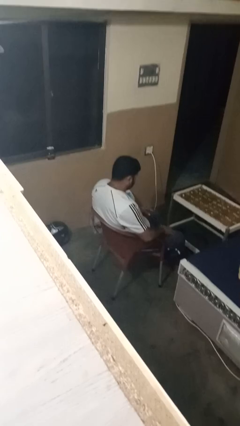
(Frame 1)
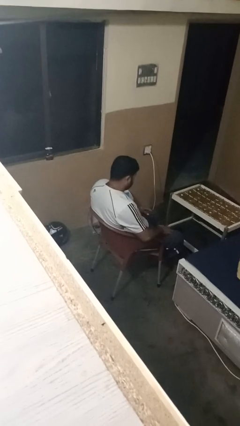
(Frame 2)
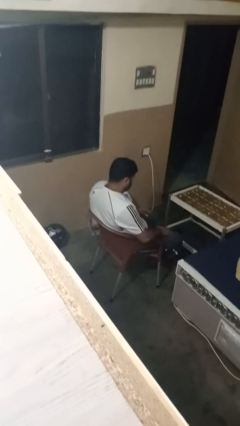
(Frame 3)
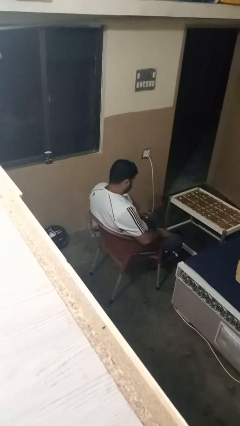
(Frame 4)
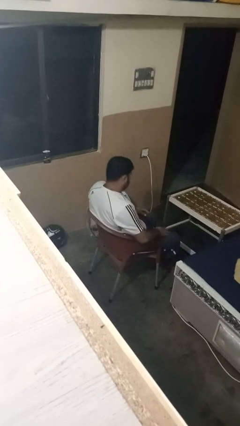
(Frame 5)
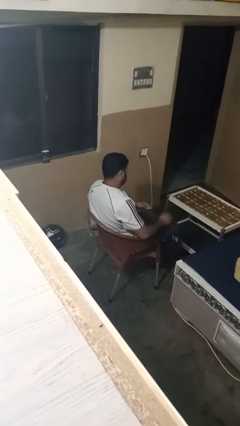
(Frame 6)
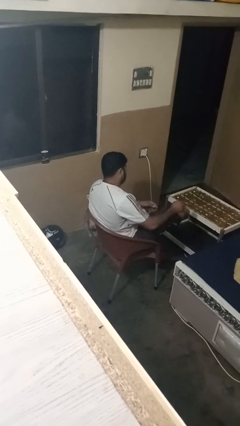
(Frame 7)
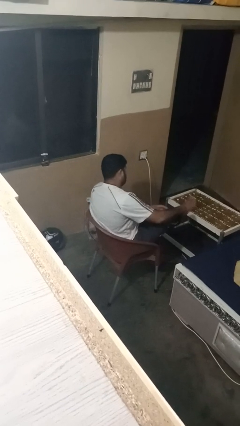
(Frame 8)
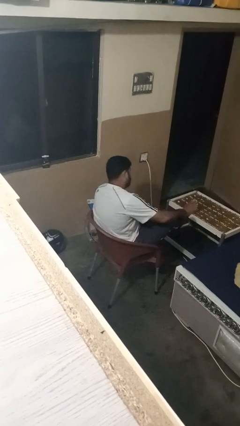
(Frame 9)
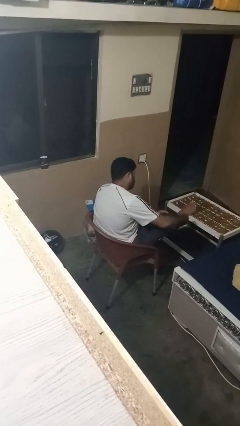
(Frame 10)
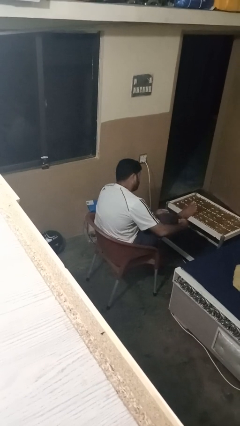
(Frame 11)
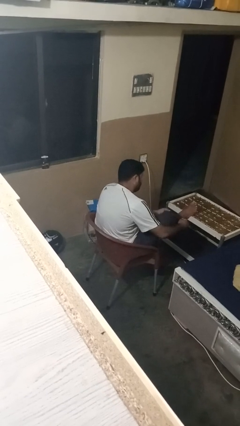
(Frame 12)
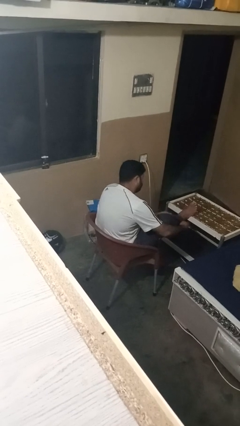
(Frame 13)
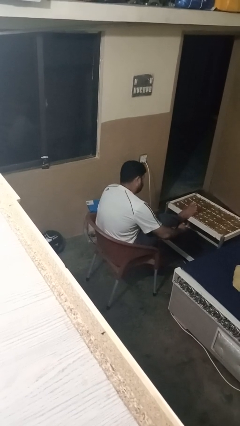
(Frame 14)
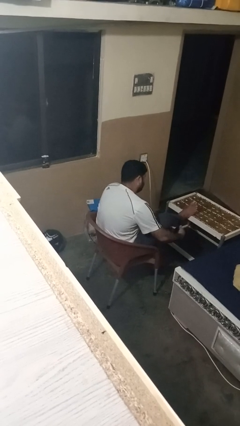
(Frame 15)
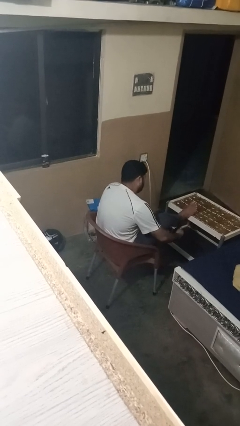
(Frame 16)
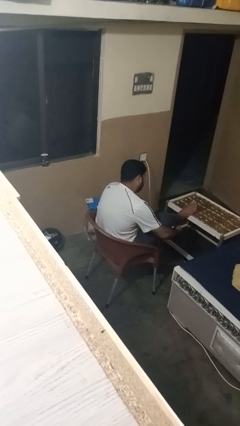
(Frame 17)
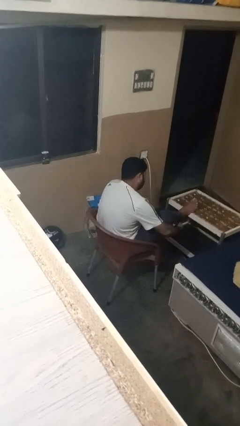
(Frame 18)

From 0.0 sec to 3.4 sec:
person hikes up pants

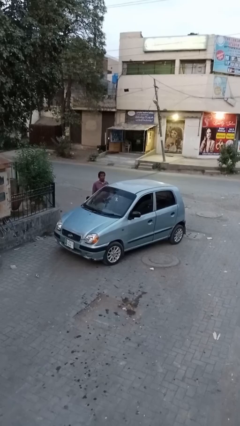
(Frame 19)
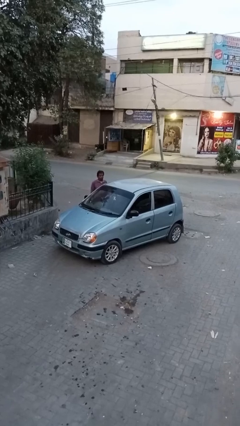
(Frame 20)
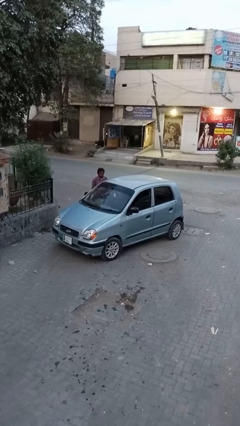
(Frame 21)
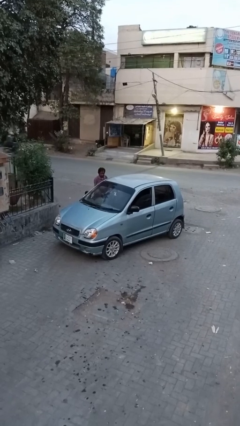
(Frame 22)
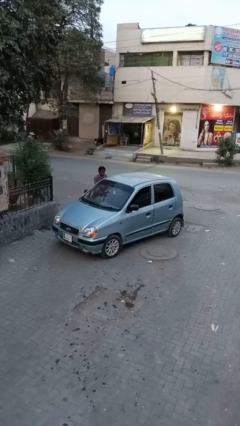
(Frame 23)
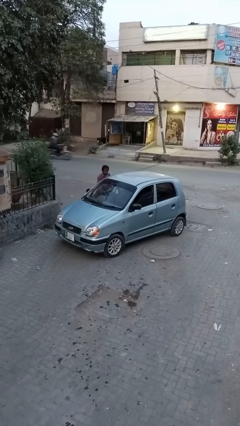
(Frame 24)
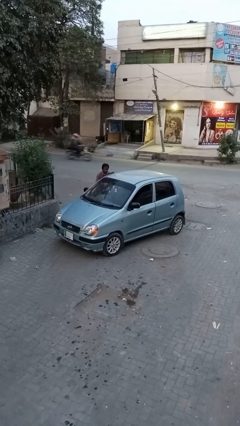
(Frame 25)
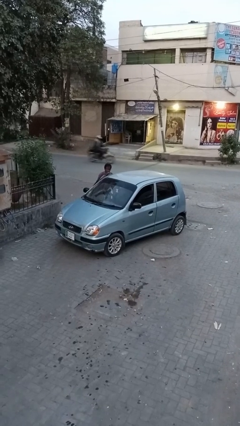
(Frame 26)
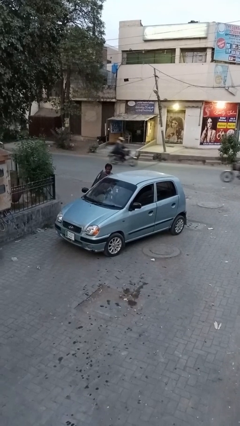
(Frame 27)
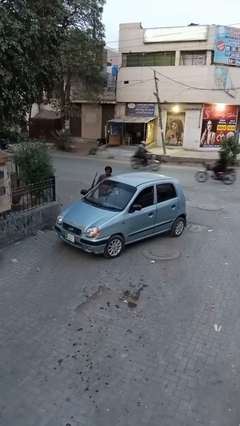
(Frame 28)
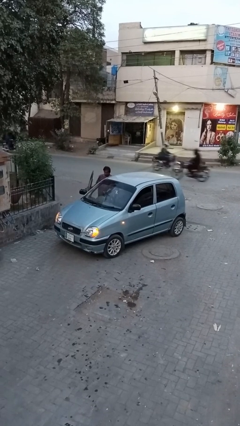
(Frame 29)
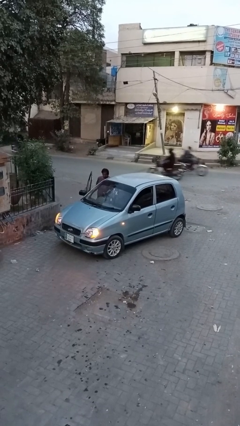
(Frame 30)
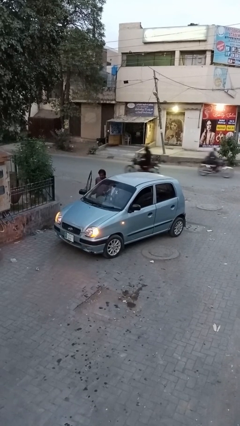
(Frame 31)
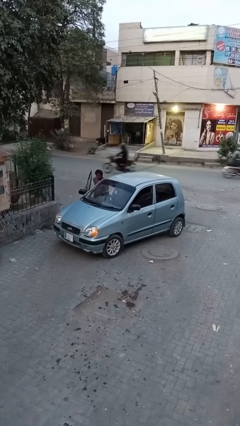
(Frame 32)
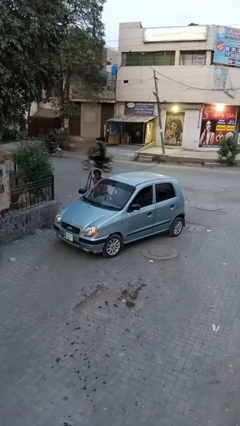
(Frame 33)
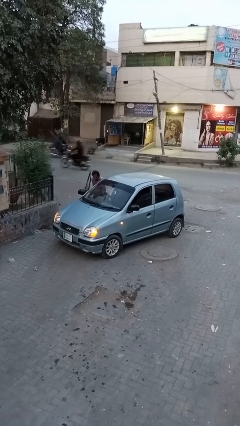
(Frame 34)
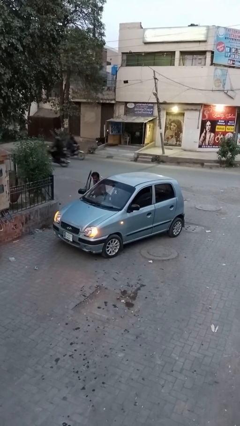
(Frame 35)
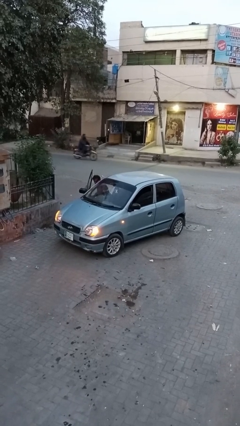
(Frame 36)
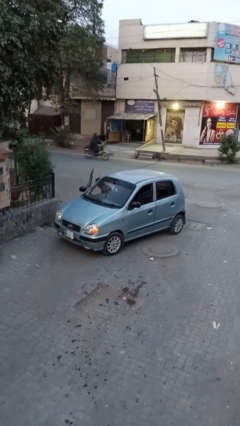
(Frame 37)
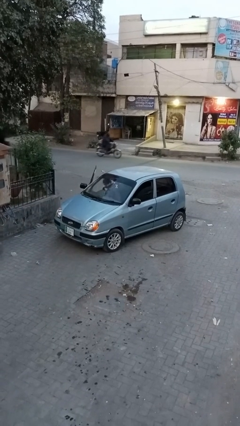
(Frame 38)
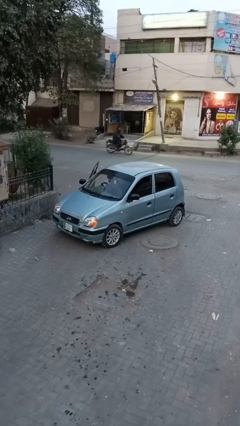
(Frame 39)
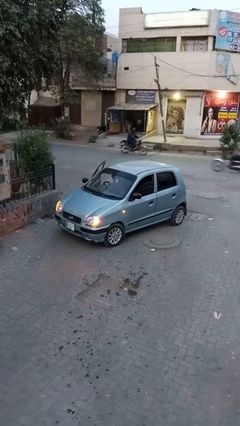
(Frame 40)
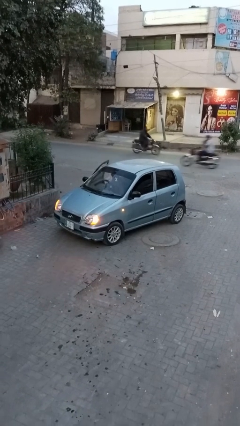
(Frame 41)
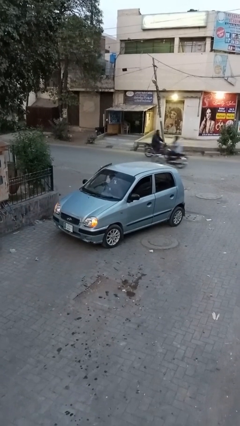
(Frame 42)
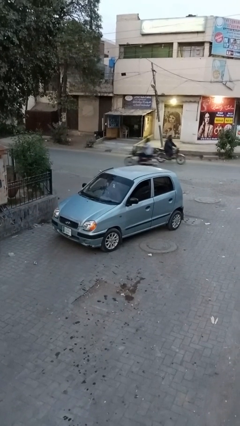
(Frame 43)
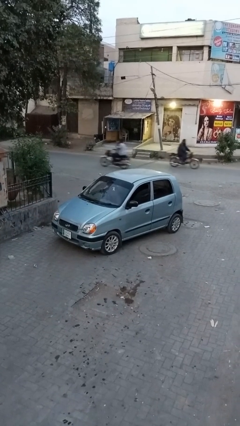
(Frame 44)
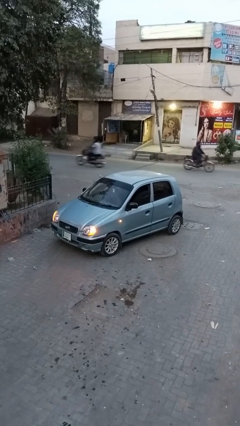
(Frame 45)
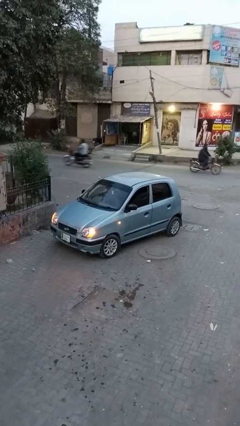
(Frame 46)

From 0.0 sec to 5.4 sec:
car picks up person

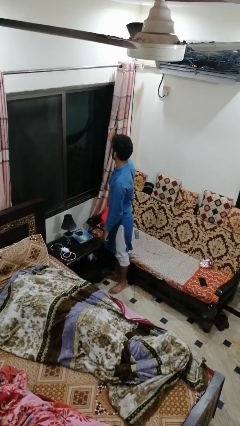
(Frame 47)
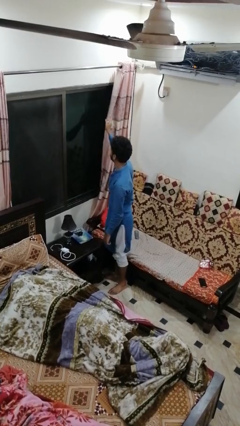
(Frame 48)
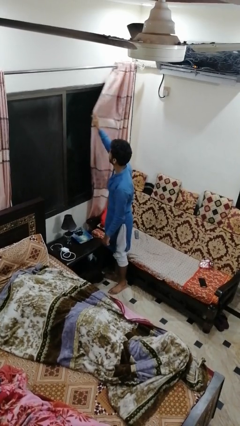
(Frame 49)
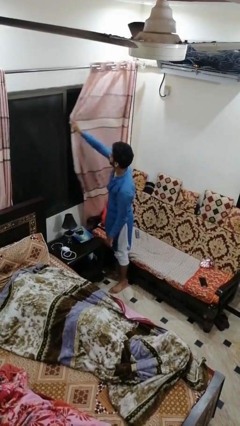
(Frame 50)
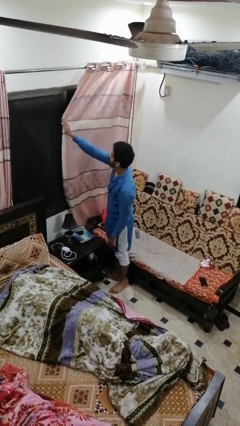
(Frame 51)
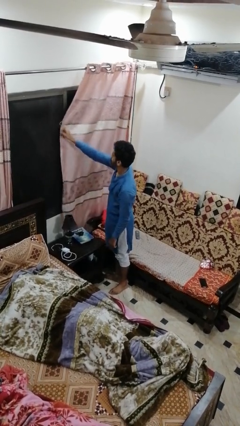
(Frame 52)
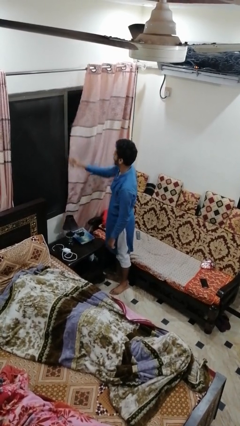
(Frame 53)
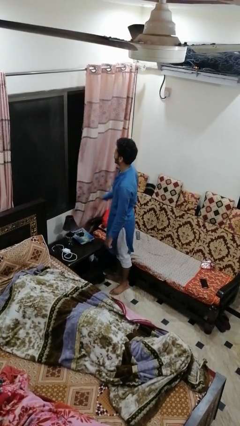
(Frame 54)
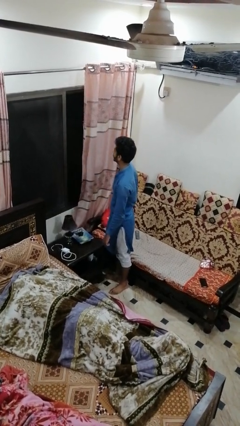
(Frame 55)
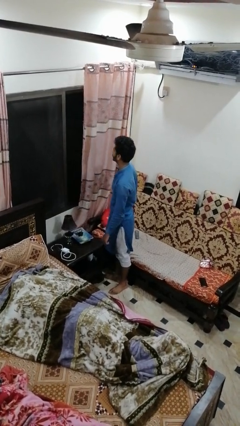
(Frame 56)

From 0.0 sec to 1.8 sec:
person closes curtains

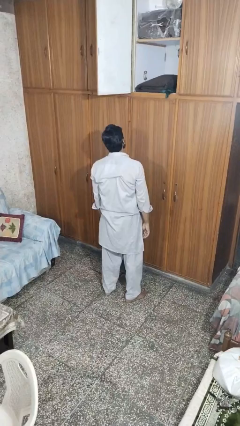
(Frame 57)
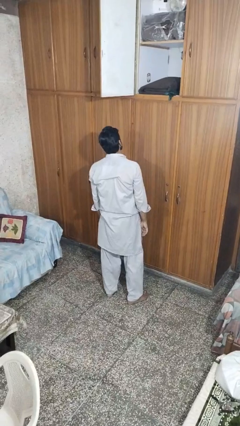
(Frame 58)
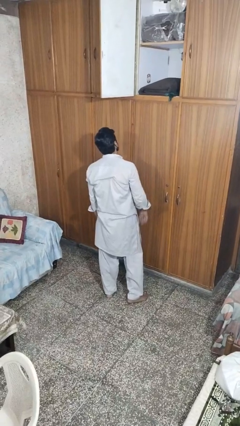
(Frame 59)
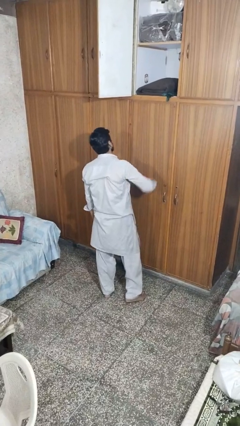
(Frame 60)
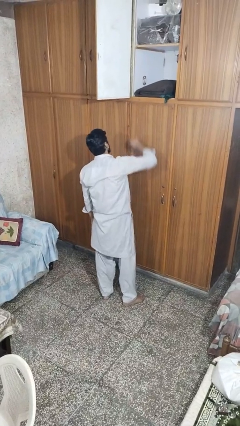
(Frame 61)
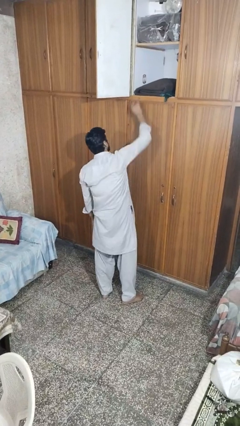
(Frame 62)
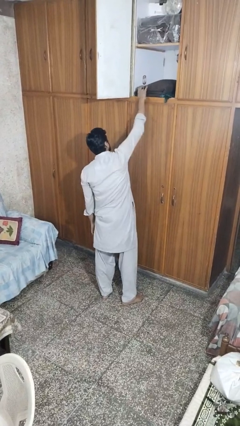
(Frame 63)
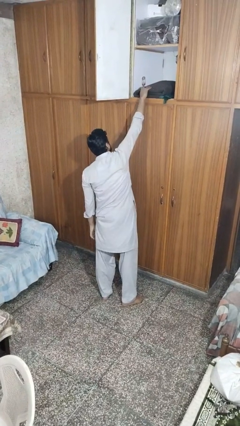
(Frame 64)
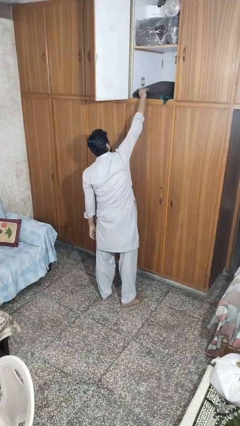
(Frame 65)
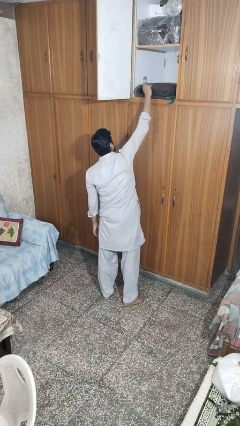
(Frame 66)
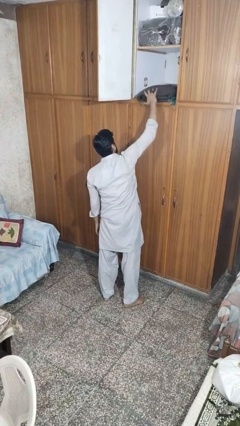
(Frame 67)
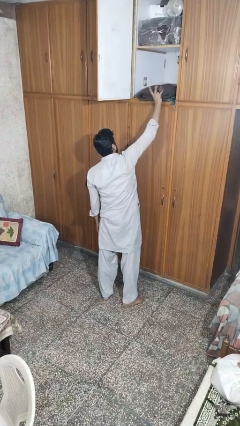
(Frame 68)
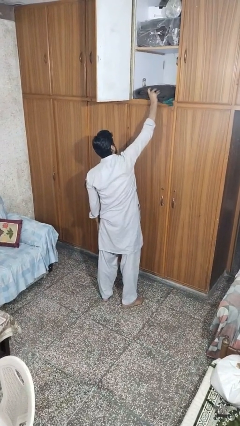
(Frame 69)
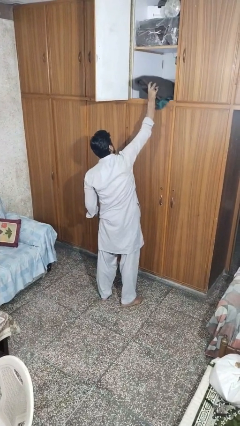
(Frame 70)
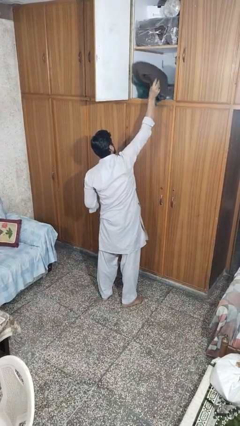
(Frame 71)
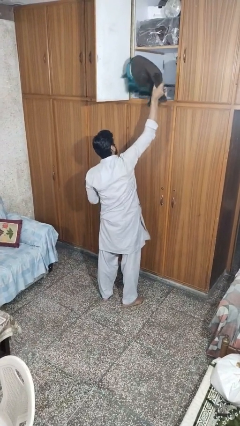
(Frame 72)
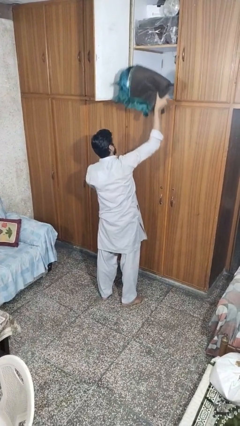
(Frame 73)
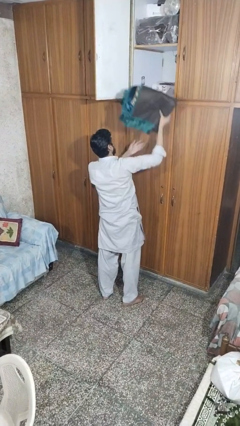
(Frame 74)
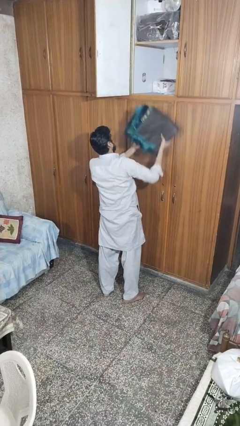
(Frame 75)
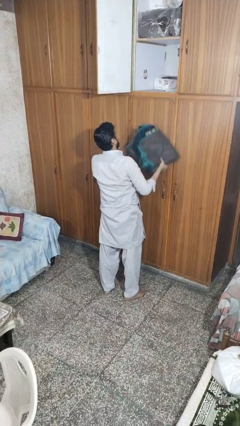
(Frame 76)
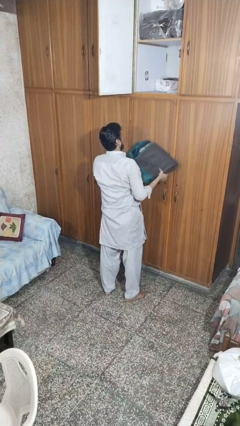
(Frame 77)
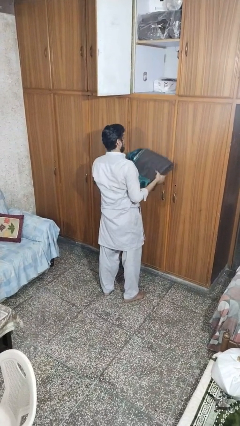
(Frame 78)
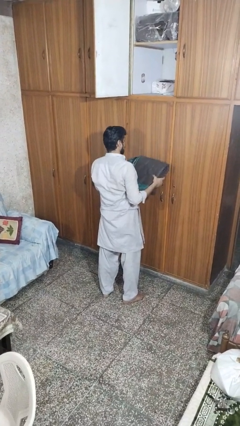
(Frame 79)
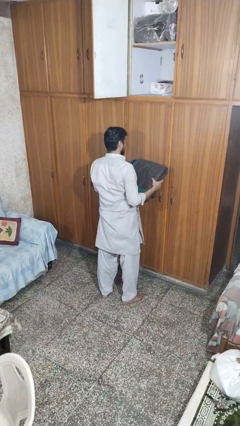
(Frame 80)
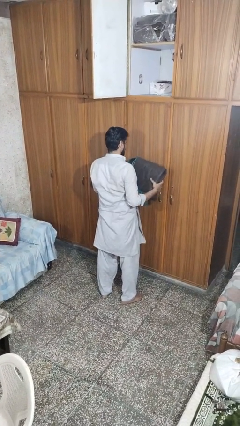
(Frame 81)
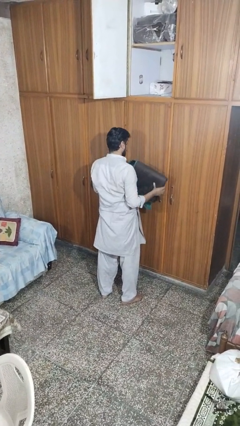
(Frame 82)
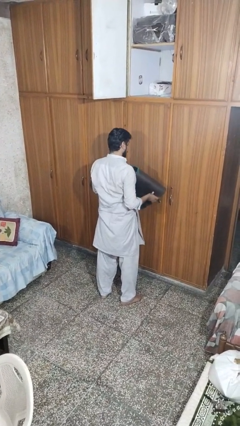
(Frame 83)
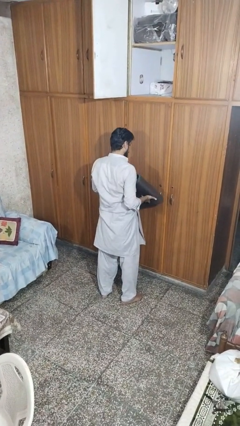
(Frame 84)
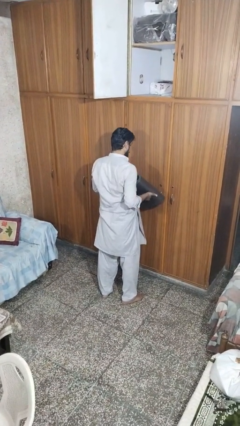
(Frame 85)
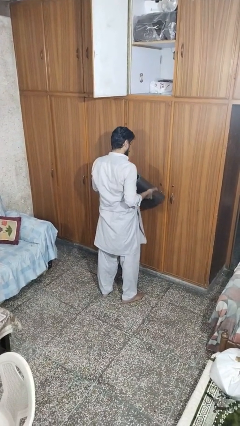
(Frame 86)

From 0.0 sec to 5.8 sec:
person picks up object from shelf

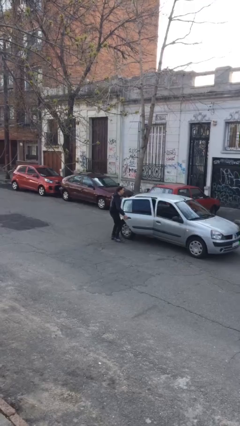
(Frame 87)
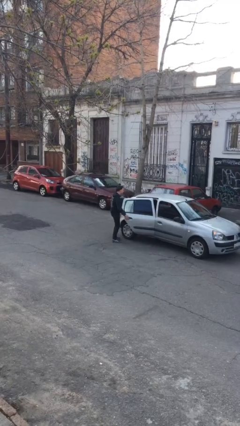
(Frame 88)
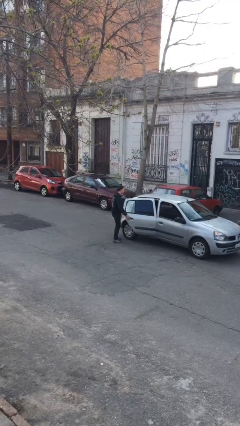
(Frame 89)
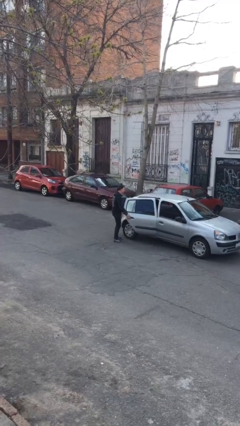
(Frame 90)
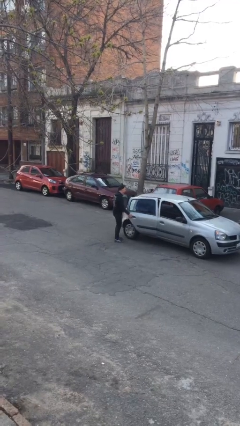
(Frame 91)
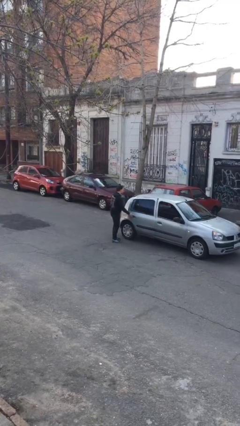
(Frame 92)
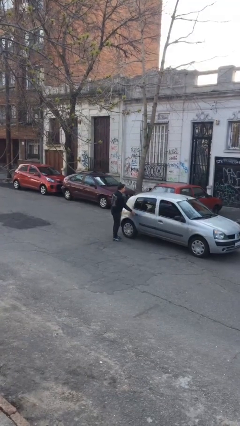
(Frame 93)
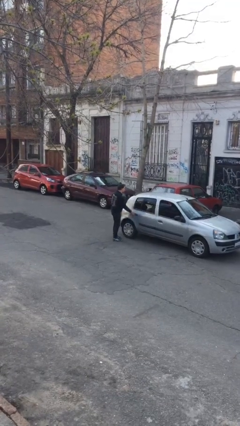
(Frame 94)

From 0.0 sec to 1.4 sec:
person unloads car
